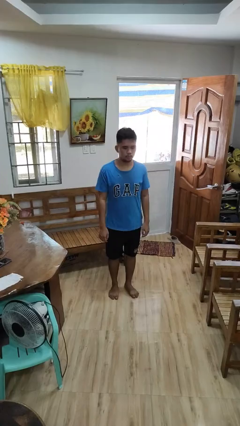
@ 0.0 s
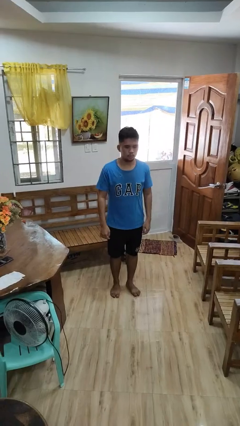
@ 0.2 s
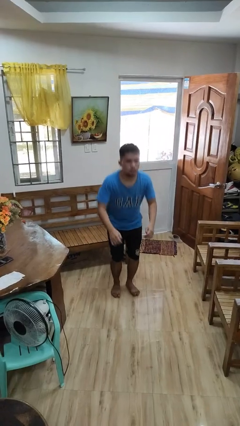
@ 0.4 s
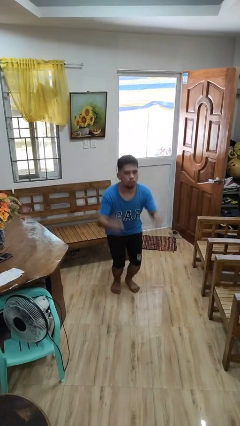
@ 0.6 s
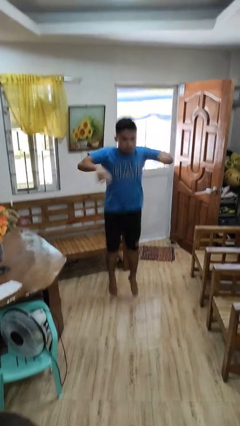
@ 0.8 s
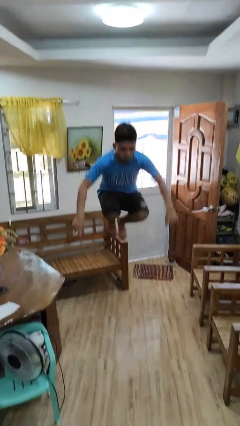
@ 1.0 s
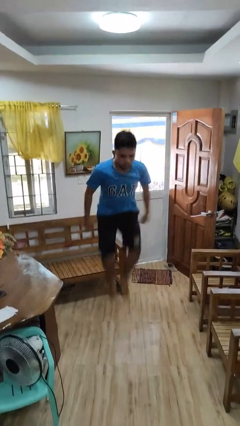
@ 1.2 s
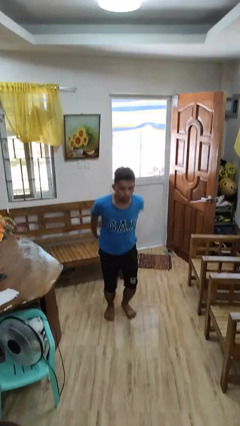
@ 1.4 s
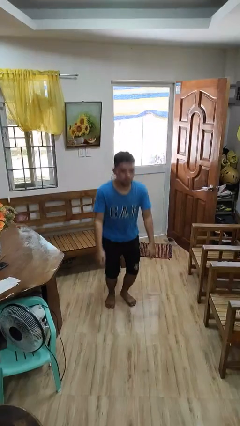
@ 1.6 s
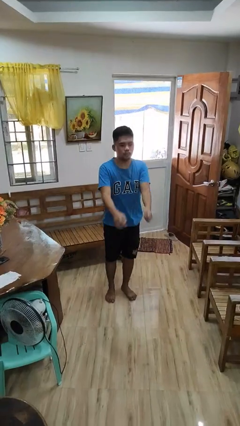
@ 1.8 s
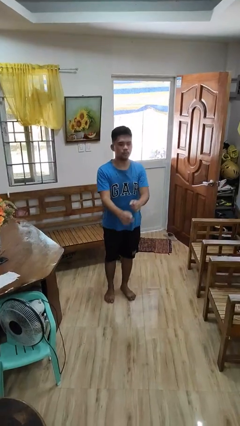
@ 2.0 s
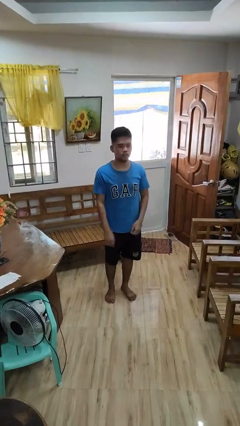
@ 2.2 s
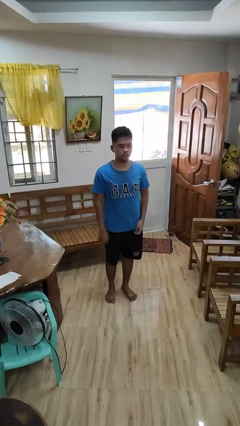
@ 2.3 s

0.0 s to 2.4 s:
person jumps

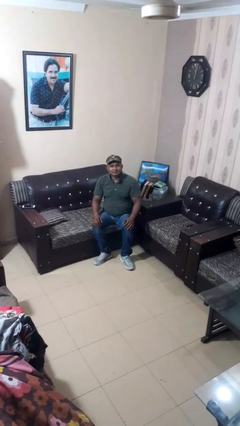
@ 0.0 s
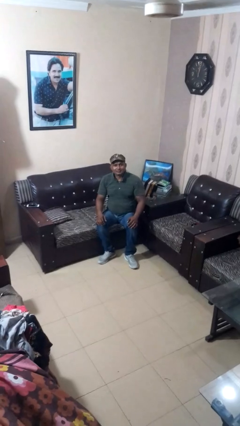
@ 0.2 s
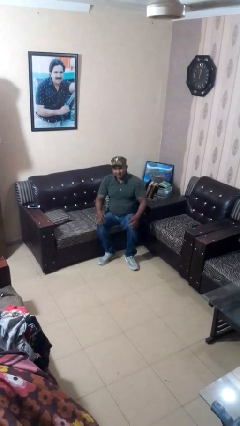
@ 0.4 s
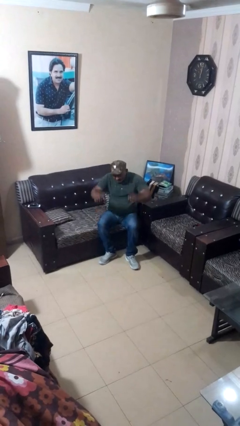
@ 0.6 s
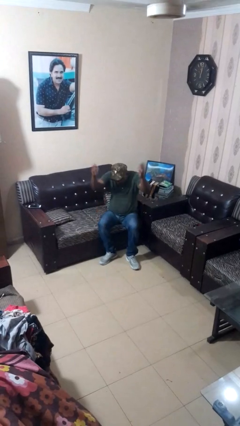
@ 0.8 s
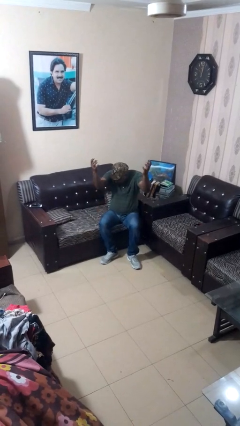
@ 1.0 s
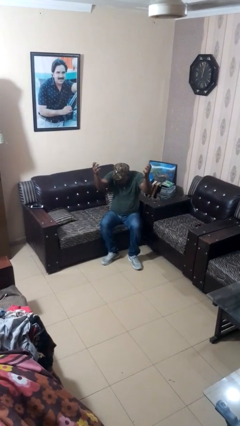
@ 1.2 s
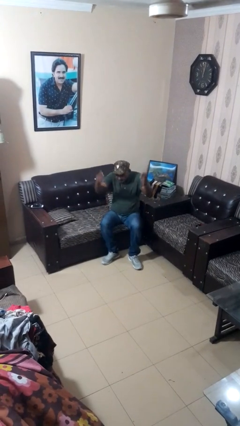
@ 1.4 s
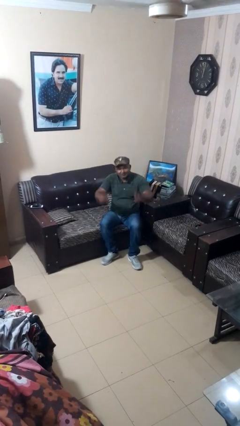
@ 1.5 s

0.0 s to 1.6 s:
person shrugs

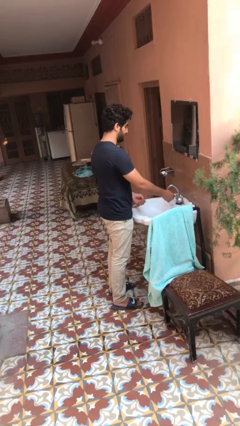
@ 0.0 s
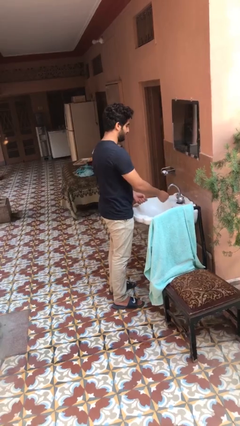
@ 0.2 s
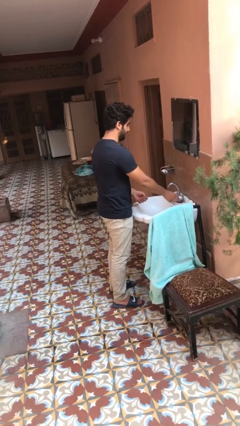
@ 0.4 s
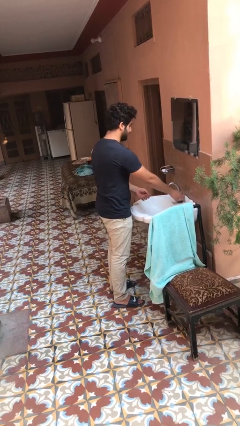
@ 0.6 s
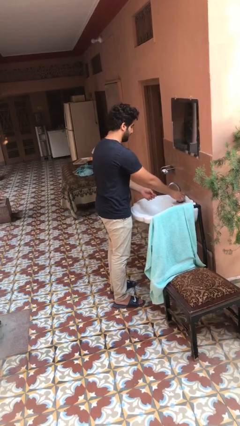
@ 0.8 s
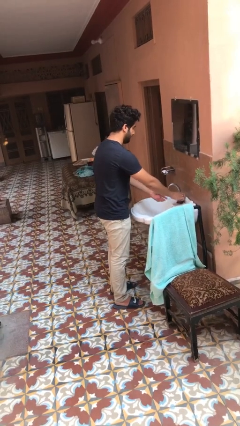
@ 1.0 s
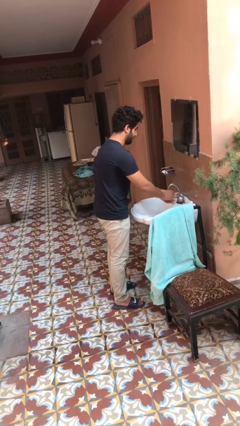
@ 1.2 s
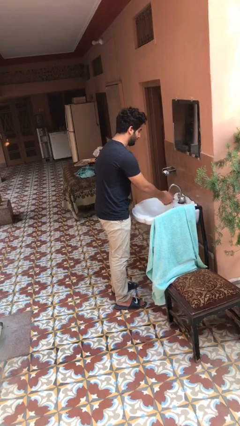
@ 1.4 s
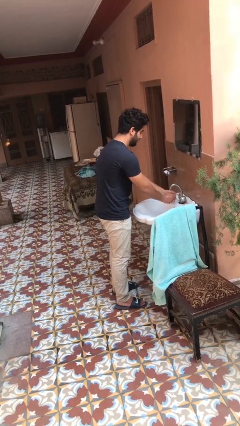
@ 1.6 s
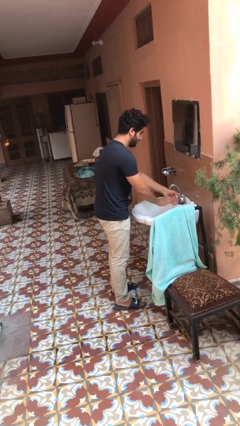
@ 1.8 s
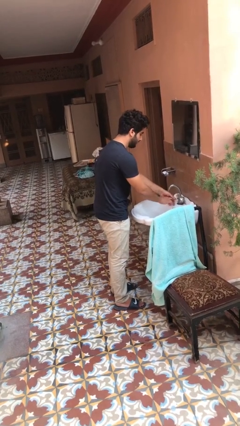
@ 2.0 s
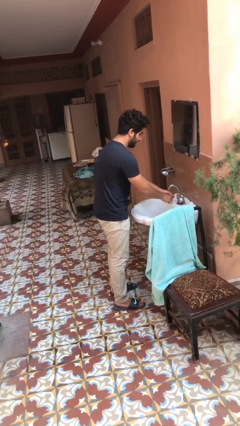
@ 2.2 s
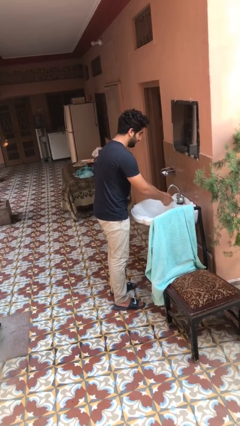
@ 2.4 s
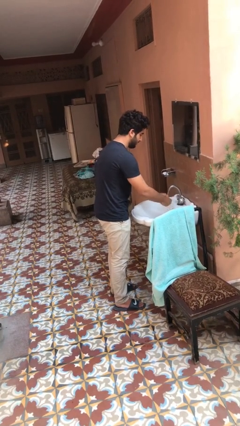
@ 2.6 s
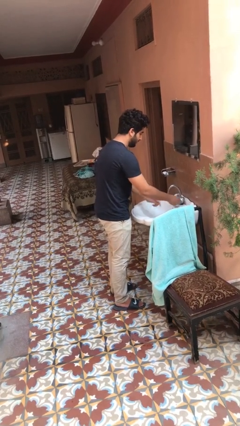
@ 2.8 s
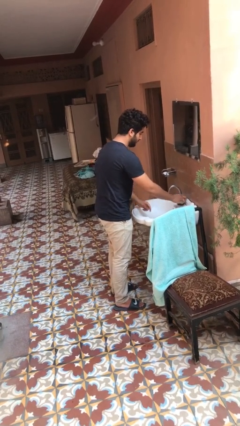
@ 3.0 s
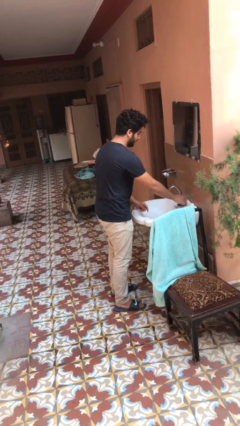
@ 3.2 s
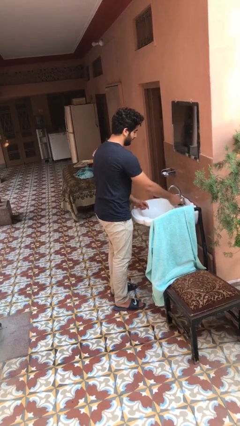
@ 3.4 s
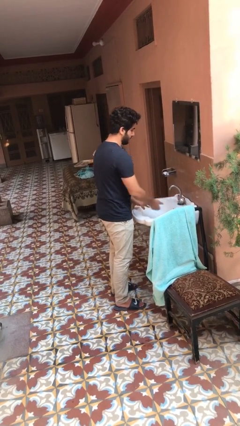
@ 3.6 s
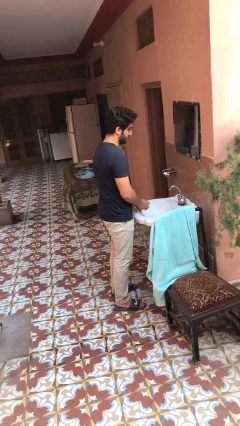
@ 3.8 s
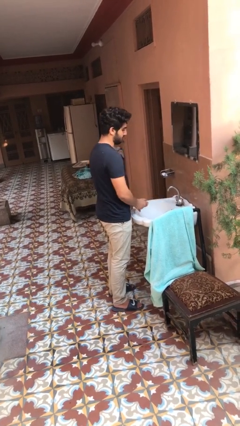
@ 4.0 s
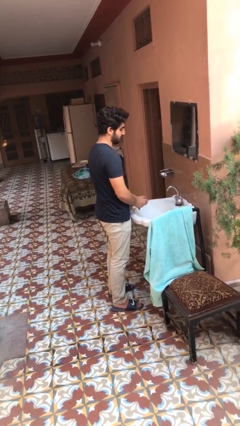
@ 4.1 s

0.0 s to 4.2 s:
person washes hands

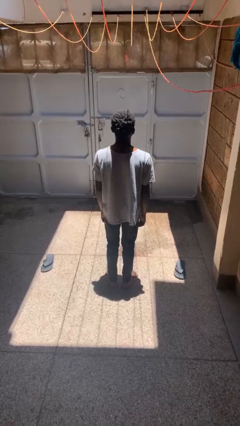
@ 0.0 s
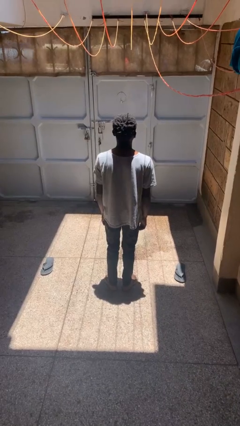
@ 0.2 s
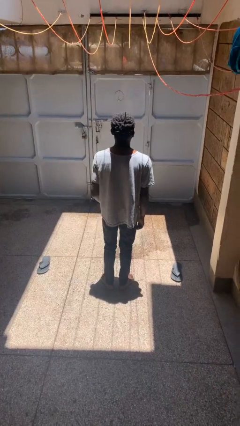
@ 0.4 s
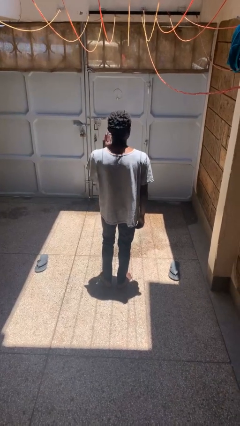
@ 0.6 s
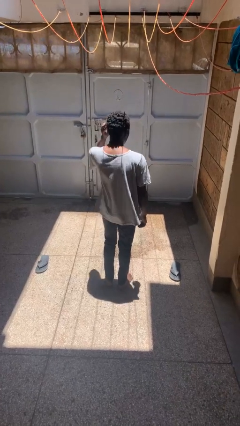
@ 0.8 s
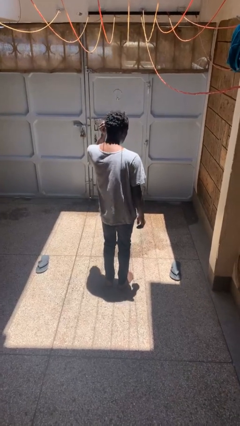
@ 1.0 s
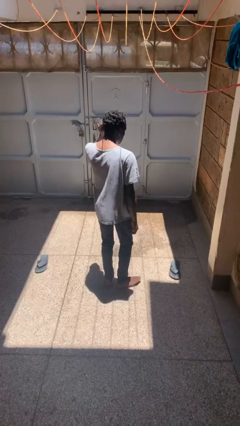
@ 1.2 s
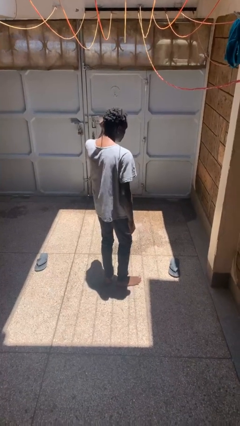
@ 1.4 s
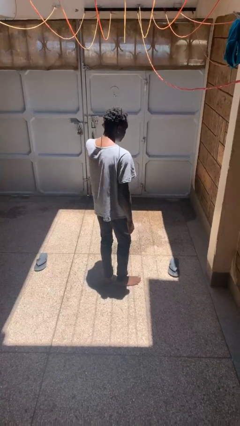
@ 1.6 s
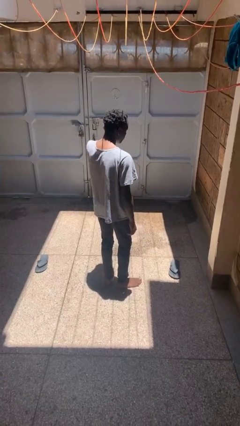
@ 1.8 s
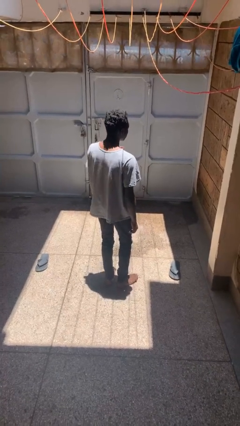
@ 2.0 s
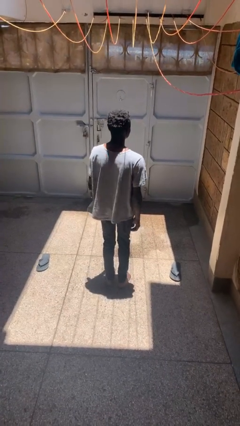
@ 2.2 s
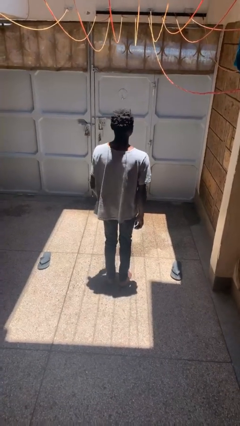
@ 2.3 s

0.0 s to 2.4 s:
person touches earlobe

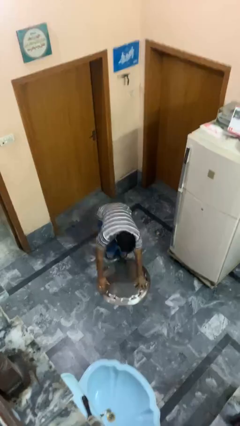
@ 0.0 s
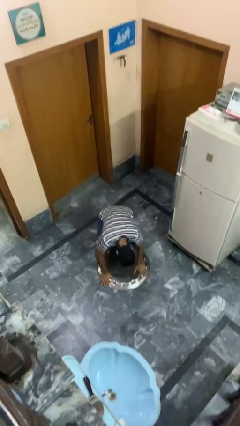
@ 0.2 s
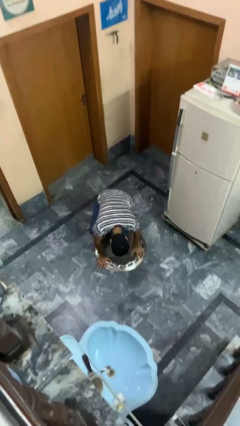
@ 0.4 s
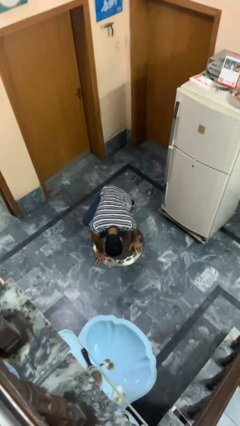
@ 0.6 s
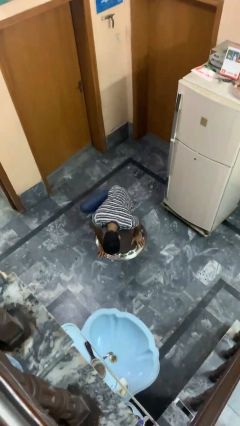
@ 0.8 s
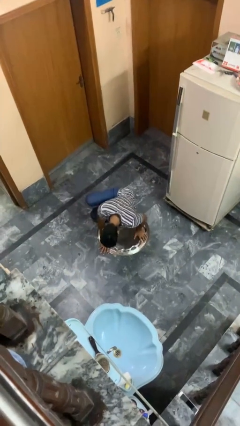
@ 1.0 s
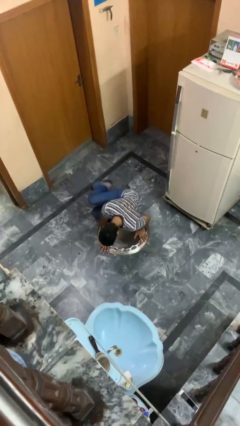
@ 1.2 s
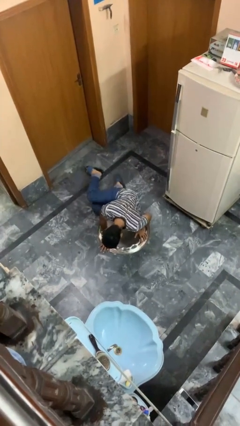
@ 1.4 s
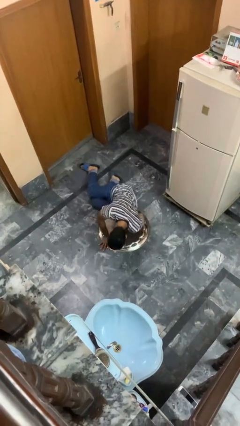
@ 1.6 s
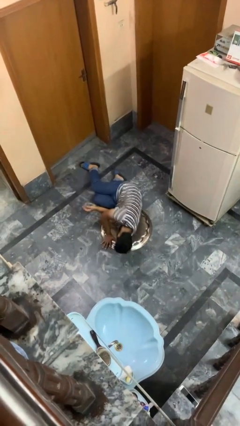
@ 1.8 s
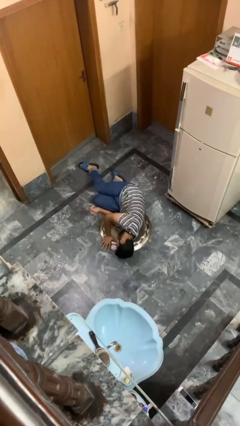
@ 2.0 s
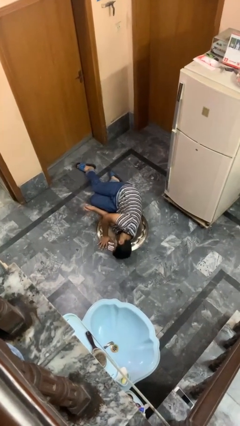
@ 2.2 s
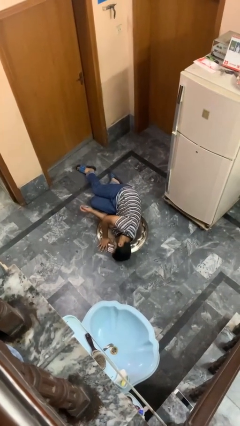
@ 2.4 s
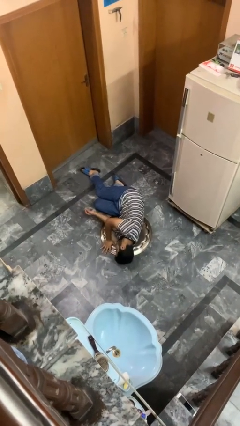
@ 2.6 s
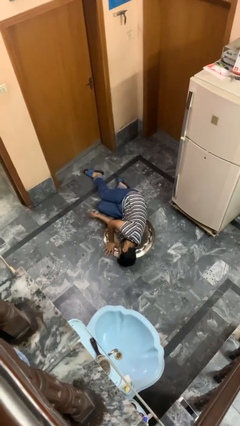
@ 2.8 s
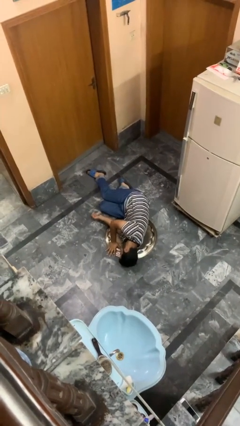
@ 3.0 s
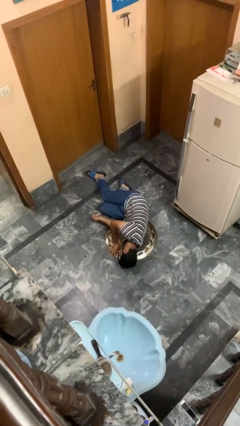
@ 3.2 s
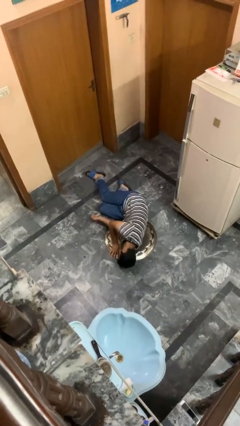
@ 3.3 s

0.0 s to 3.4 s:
person lies down on floor

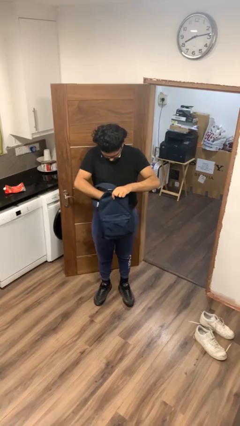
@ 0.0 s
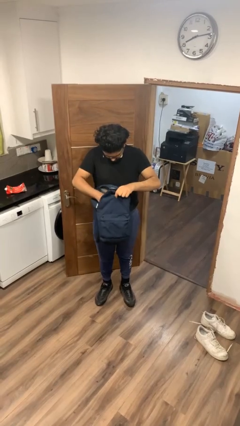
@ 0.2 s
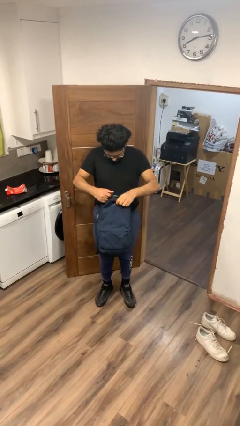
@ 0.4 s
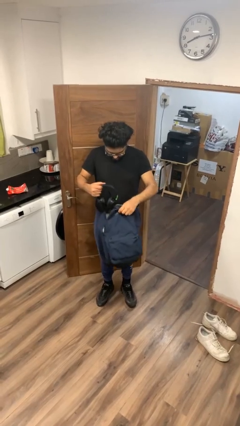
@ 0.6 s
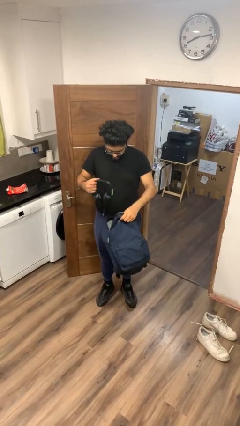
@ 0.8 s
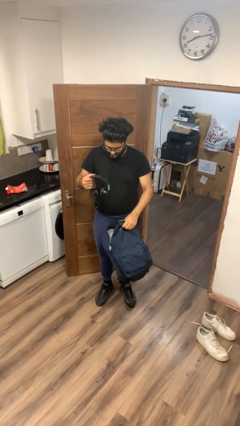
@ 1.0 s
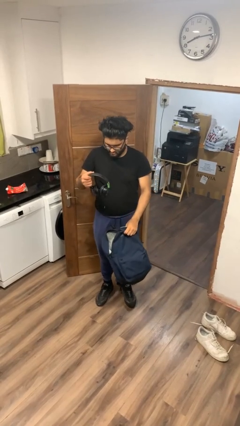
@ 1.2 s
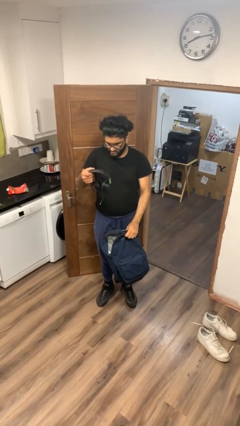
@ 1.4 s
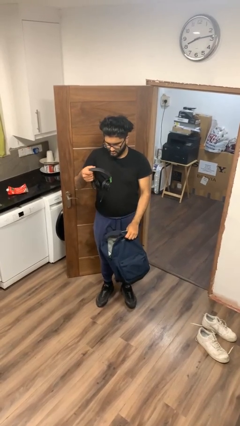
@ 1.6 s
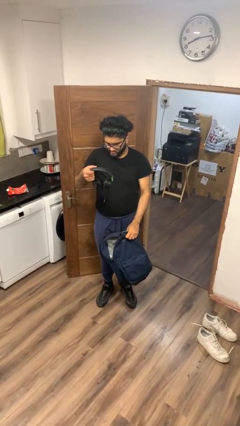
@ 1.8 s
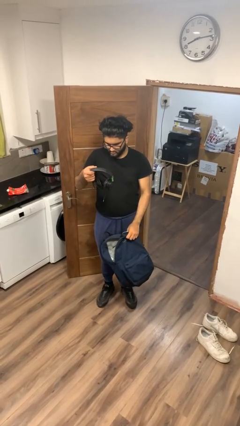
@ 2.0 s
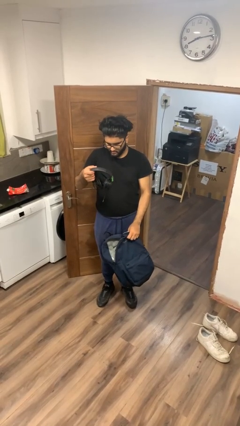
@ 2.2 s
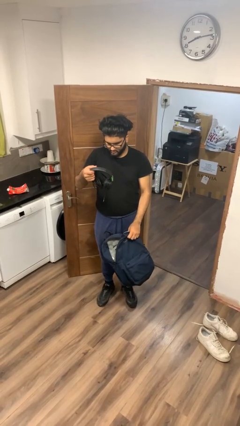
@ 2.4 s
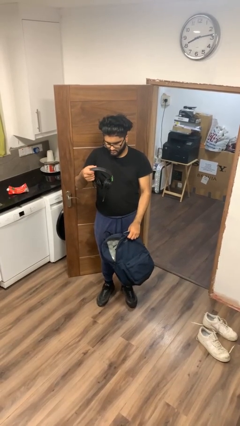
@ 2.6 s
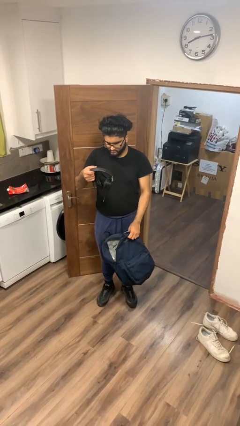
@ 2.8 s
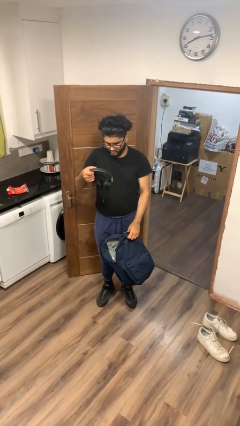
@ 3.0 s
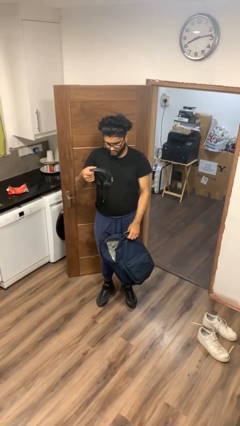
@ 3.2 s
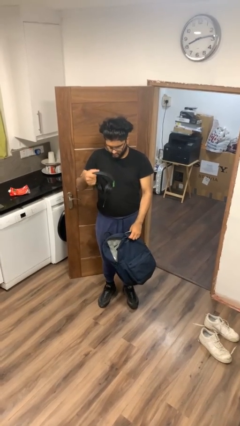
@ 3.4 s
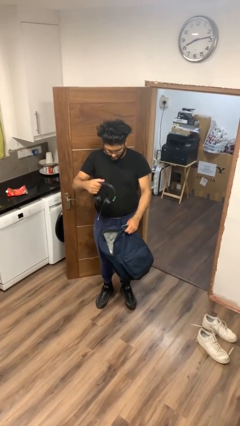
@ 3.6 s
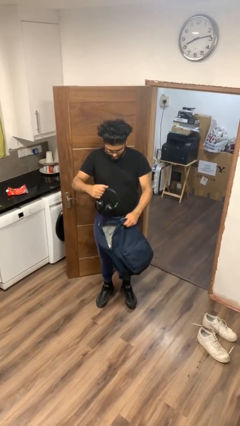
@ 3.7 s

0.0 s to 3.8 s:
person takes object from backpack
